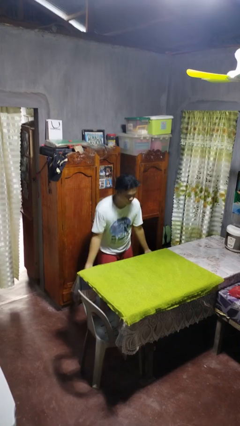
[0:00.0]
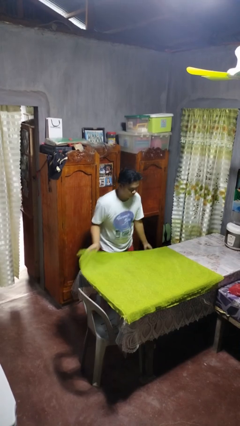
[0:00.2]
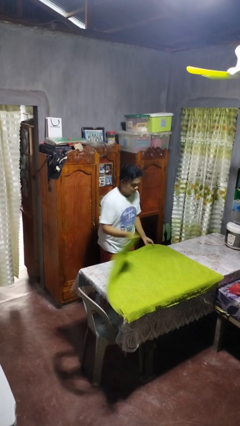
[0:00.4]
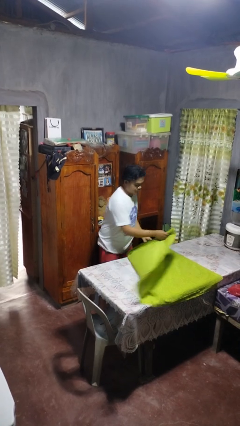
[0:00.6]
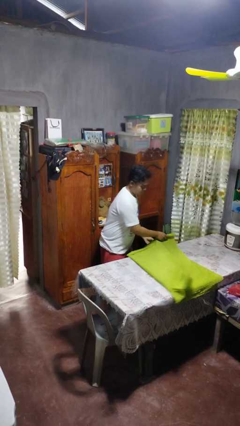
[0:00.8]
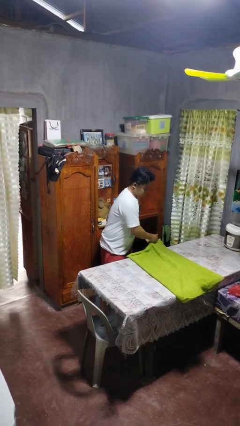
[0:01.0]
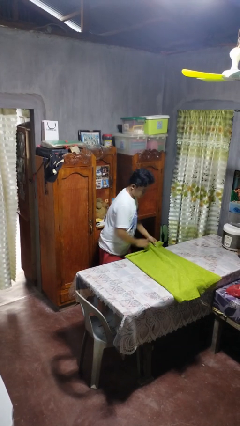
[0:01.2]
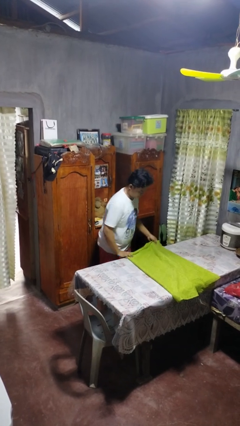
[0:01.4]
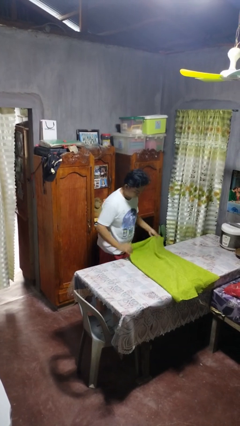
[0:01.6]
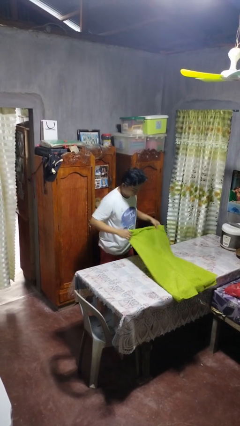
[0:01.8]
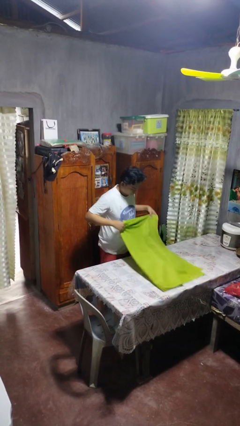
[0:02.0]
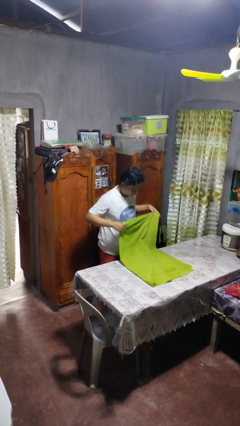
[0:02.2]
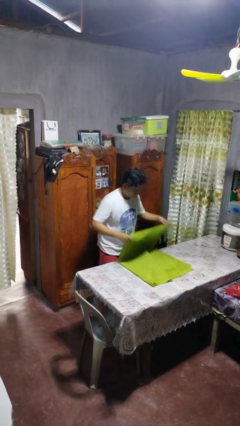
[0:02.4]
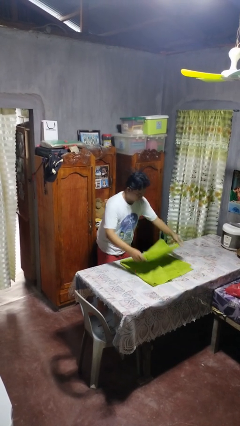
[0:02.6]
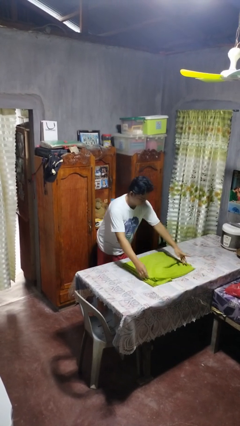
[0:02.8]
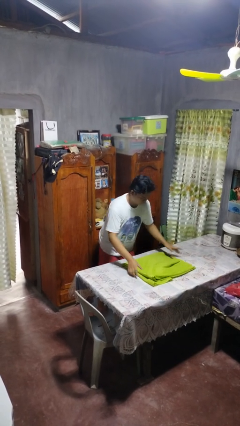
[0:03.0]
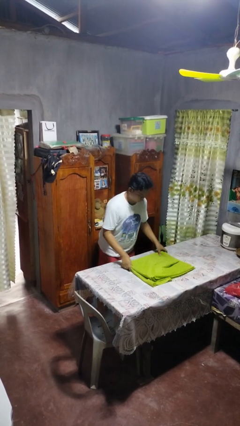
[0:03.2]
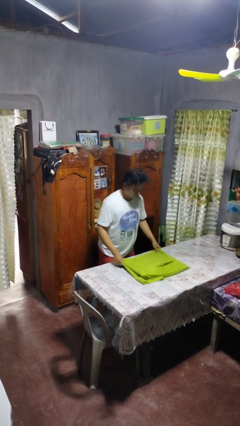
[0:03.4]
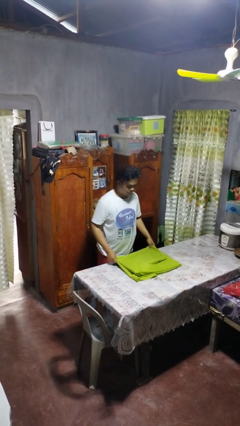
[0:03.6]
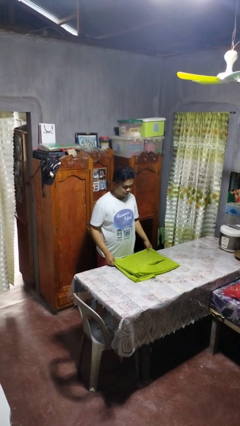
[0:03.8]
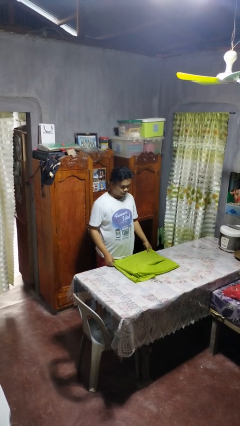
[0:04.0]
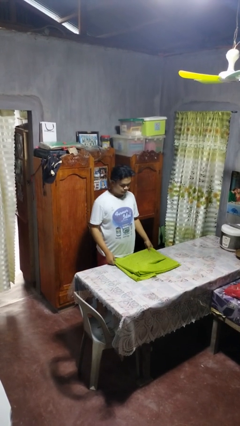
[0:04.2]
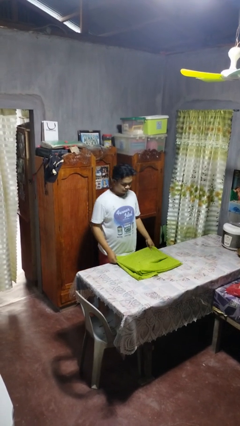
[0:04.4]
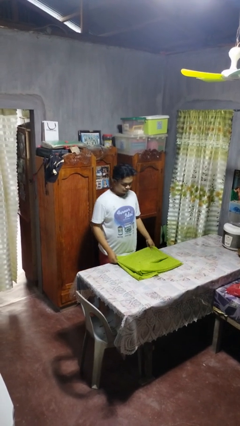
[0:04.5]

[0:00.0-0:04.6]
person folds tablecloth

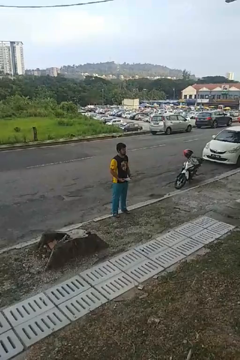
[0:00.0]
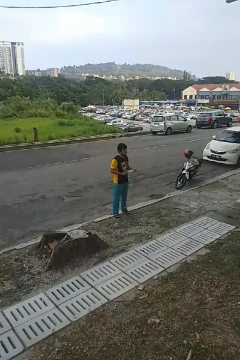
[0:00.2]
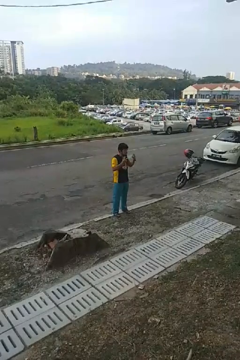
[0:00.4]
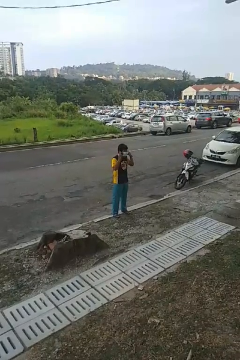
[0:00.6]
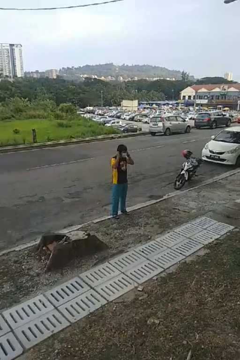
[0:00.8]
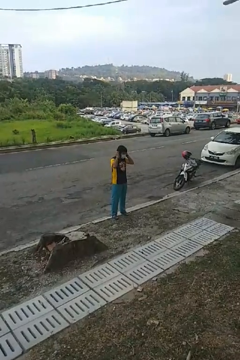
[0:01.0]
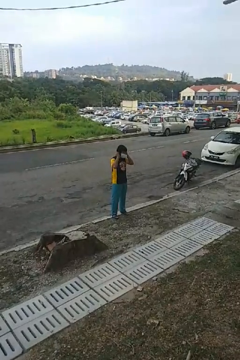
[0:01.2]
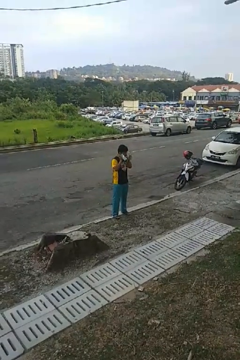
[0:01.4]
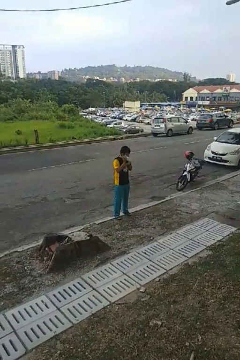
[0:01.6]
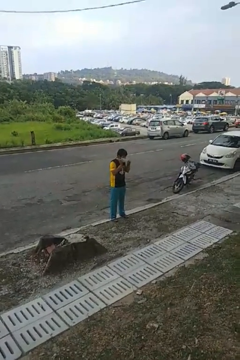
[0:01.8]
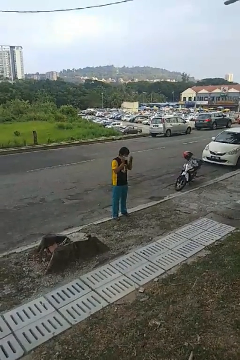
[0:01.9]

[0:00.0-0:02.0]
person puts on facemask

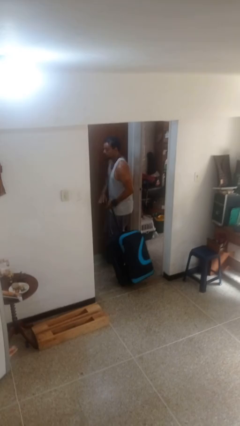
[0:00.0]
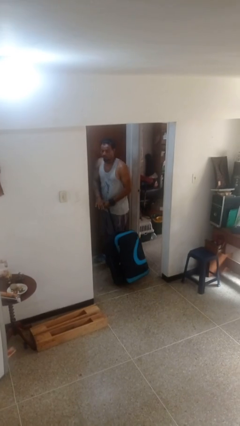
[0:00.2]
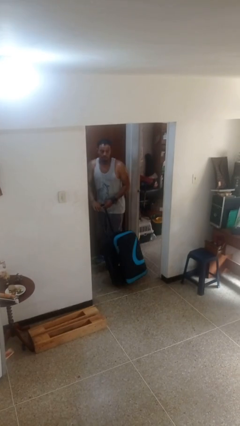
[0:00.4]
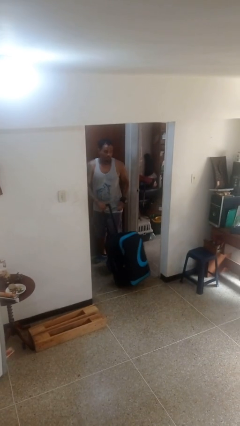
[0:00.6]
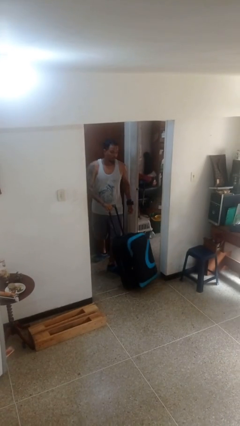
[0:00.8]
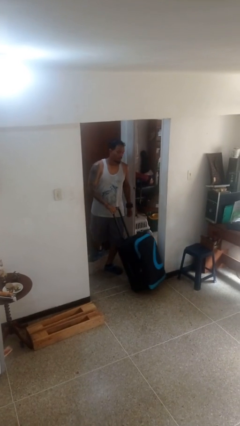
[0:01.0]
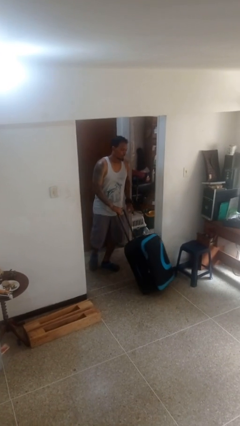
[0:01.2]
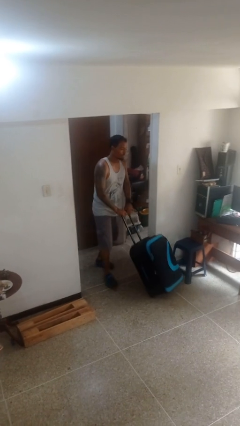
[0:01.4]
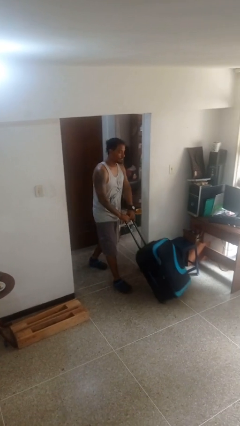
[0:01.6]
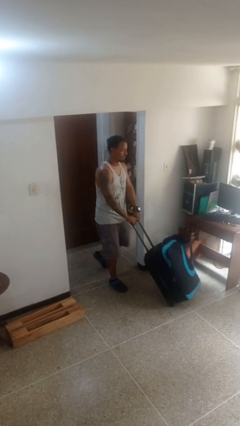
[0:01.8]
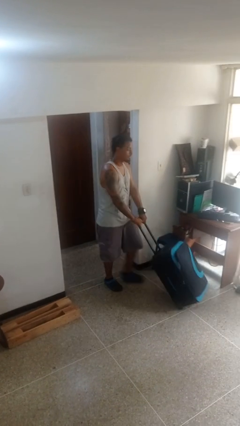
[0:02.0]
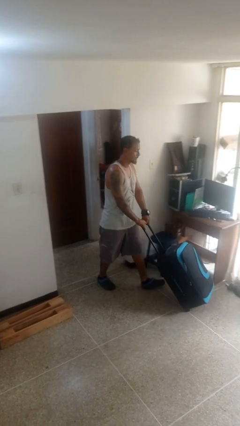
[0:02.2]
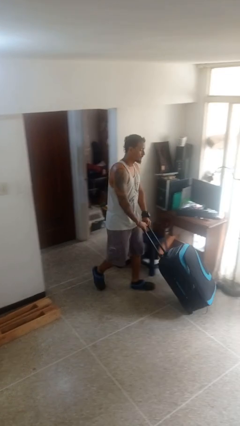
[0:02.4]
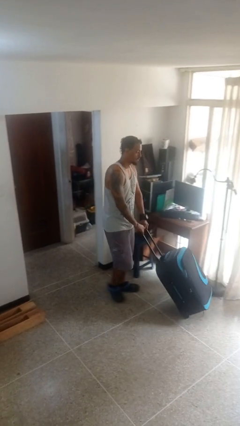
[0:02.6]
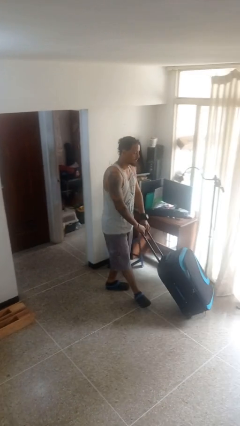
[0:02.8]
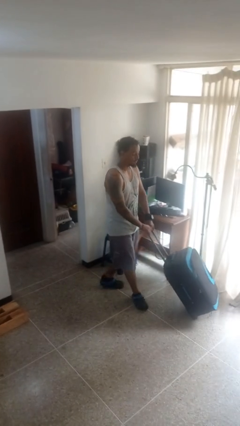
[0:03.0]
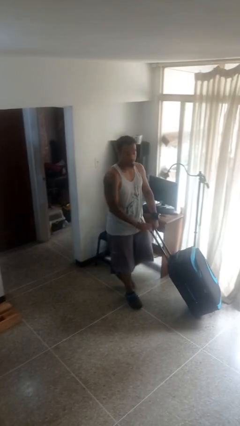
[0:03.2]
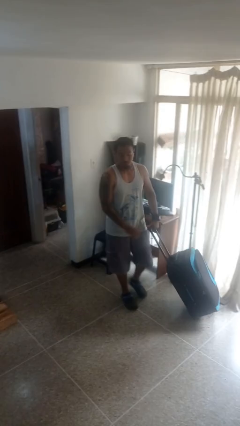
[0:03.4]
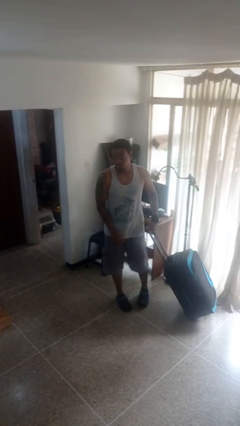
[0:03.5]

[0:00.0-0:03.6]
person pushes wheeled cart

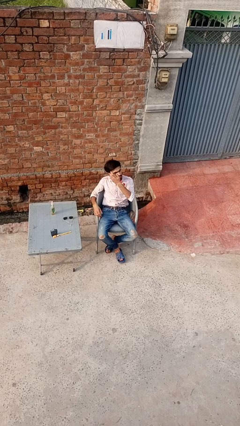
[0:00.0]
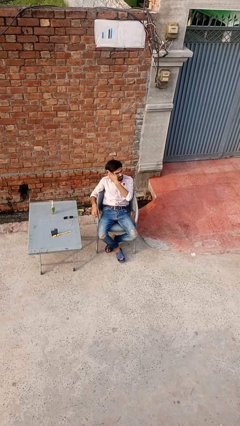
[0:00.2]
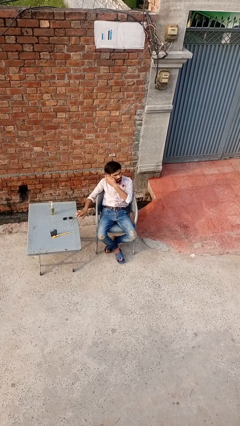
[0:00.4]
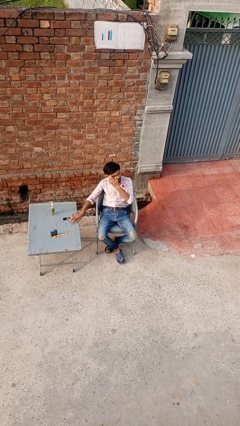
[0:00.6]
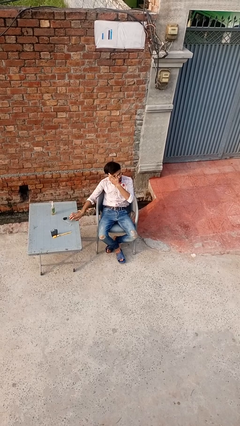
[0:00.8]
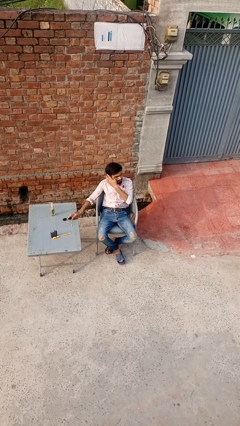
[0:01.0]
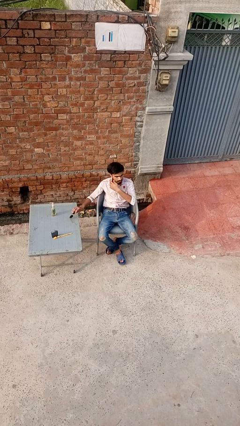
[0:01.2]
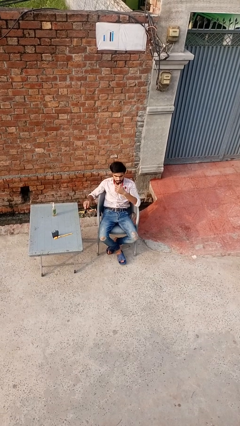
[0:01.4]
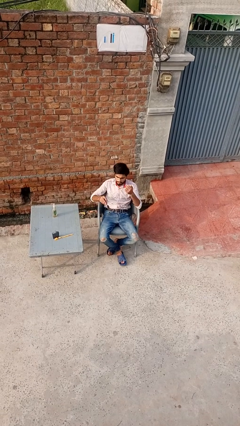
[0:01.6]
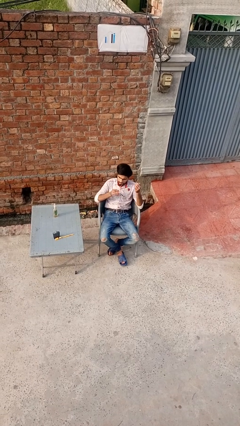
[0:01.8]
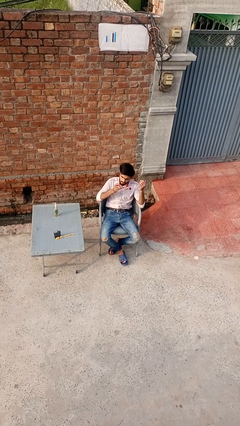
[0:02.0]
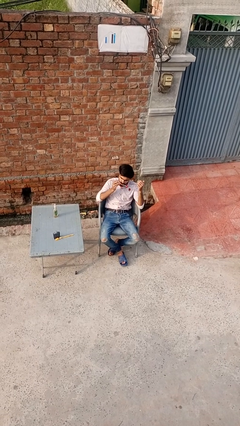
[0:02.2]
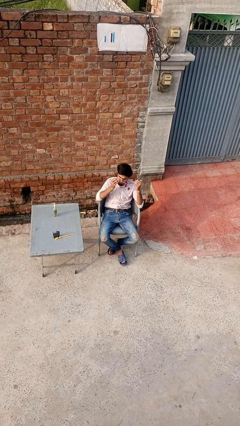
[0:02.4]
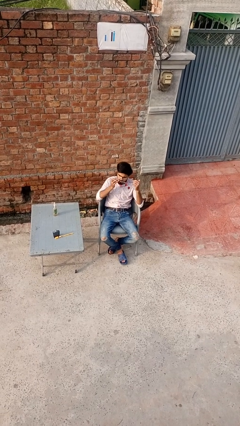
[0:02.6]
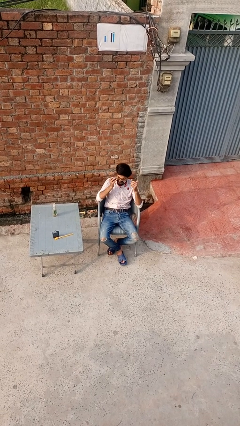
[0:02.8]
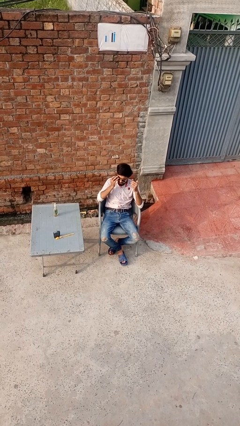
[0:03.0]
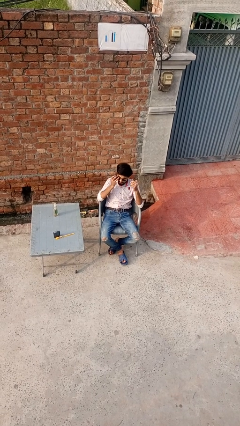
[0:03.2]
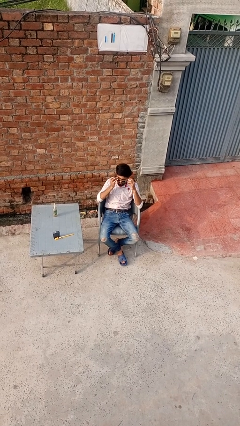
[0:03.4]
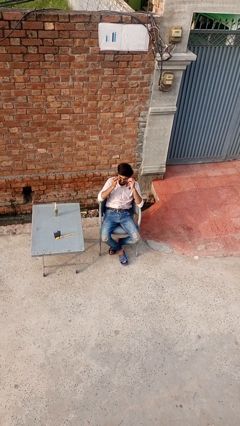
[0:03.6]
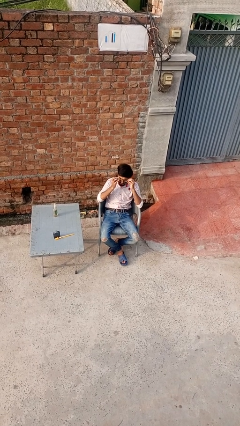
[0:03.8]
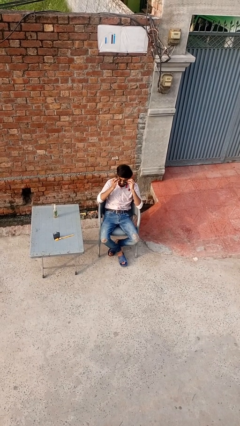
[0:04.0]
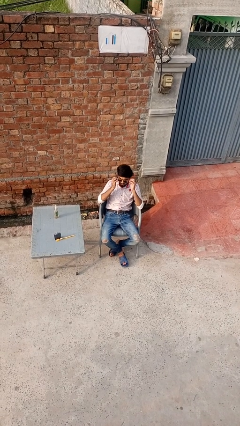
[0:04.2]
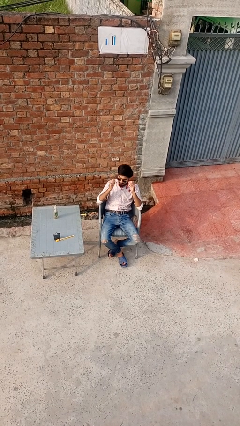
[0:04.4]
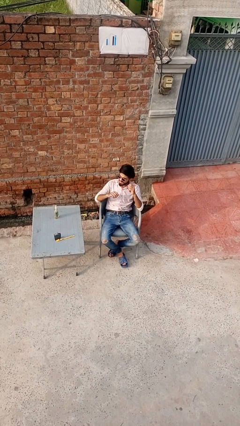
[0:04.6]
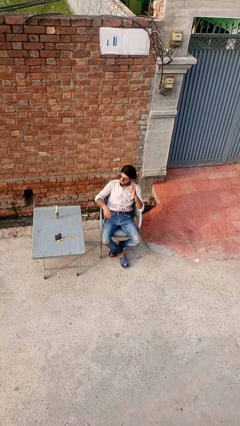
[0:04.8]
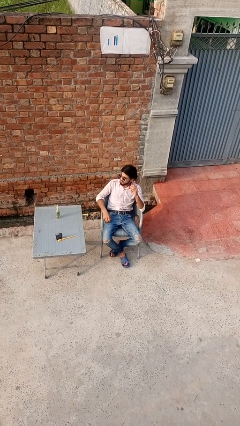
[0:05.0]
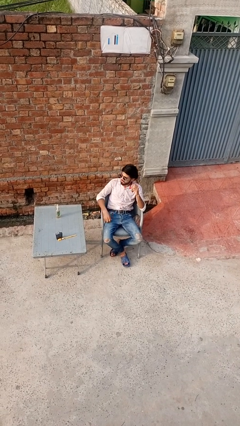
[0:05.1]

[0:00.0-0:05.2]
person puts on sunglasses

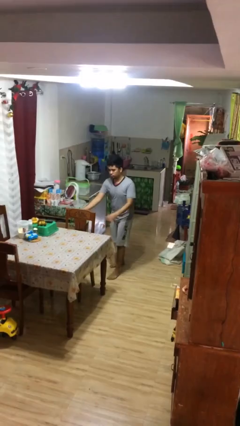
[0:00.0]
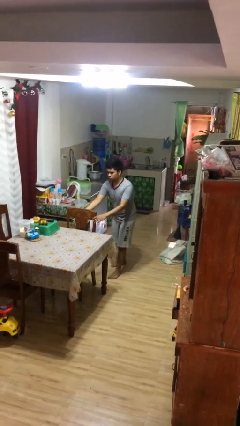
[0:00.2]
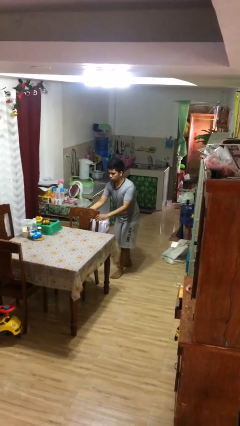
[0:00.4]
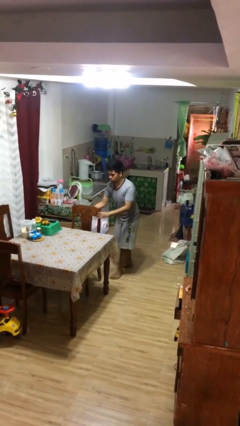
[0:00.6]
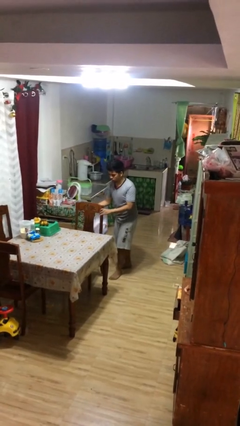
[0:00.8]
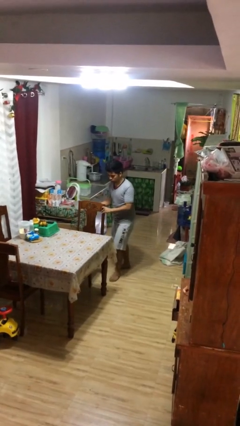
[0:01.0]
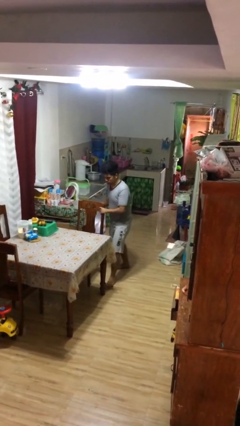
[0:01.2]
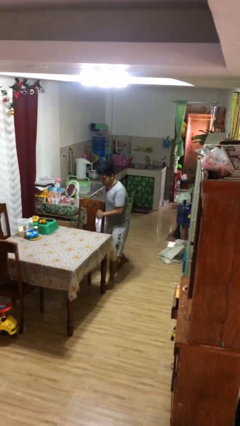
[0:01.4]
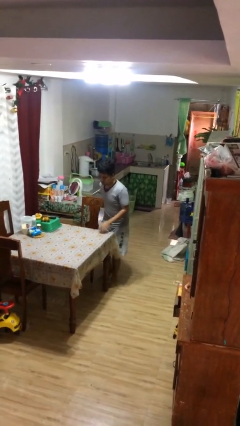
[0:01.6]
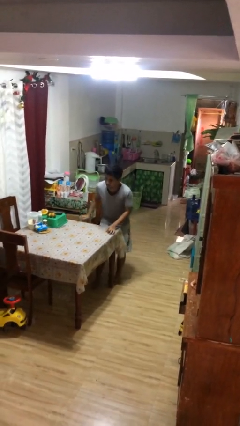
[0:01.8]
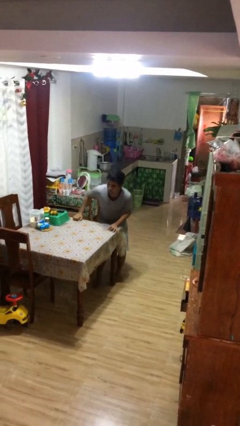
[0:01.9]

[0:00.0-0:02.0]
person stands up

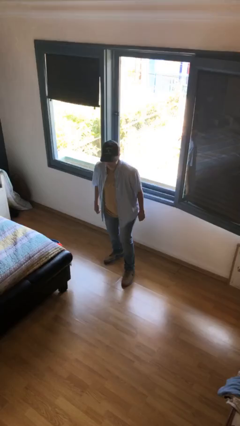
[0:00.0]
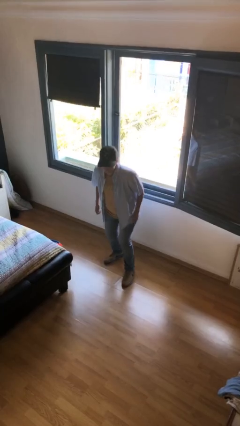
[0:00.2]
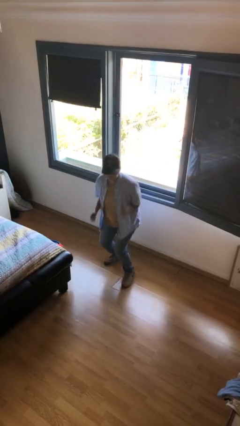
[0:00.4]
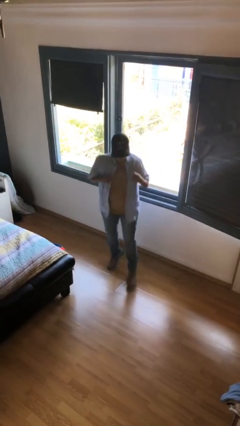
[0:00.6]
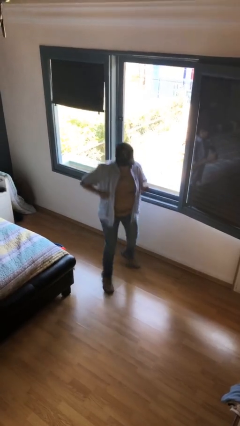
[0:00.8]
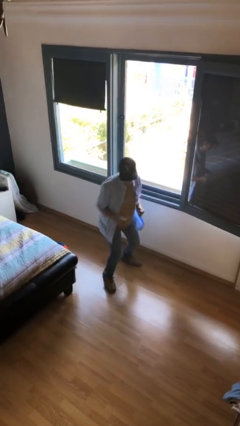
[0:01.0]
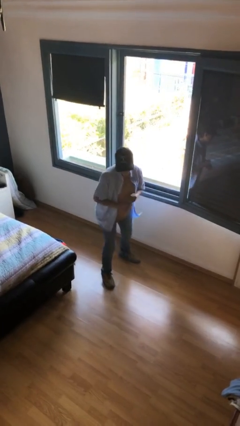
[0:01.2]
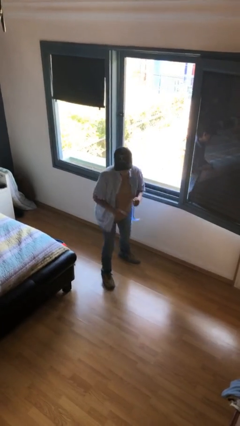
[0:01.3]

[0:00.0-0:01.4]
person jumps
